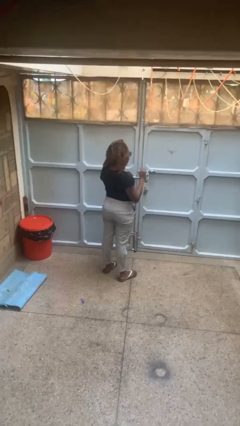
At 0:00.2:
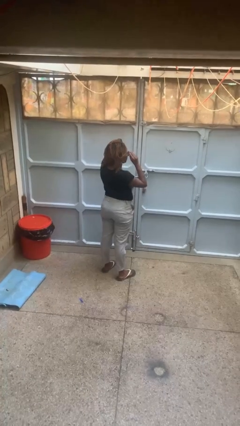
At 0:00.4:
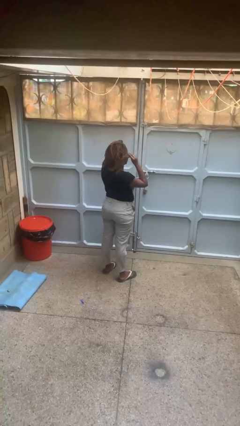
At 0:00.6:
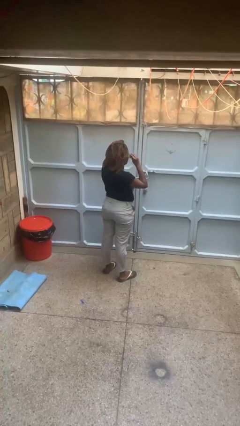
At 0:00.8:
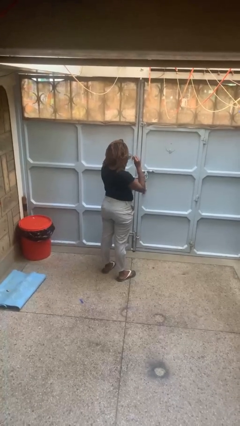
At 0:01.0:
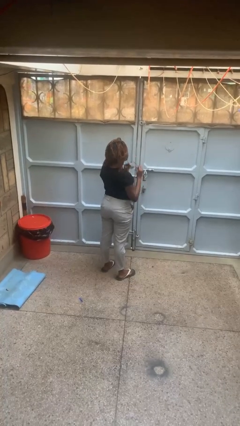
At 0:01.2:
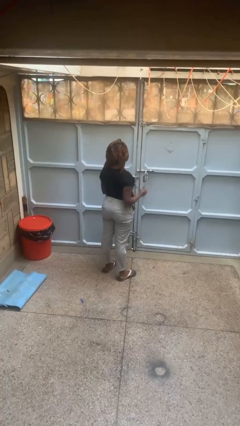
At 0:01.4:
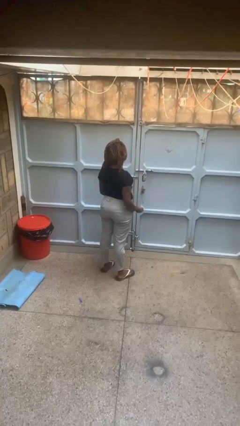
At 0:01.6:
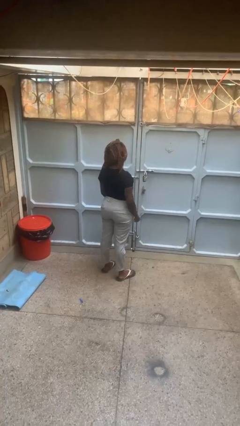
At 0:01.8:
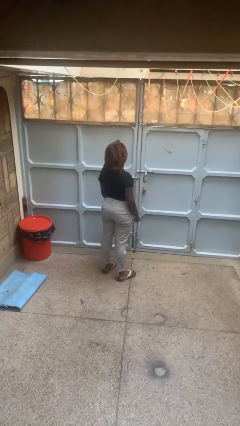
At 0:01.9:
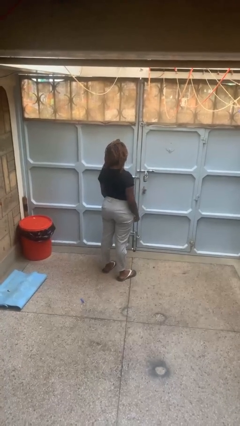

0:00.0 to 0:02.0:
person takes off glasses

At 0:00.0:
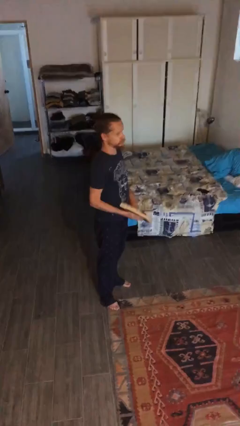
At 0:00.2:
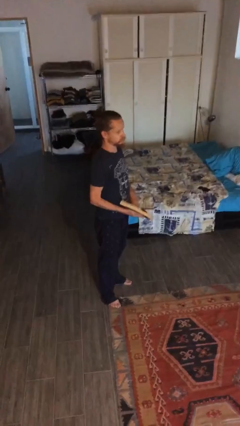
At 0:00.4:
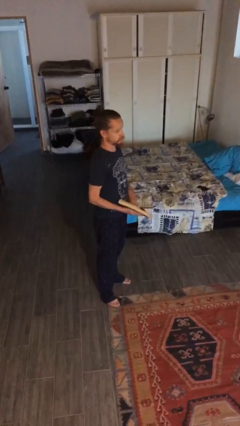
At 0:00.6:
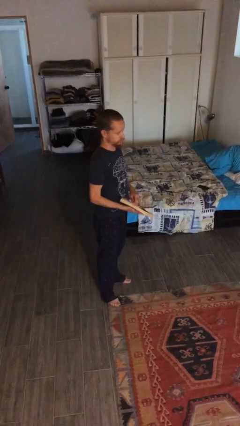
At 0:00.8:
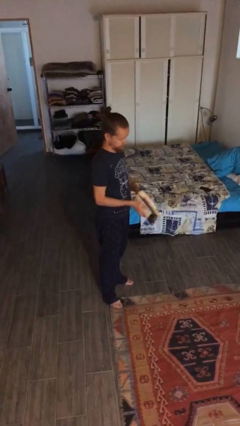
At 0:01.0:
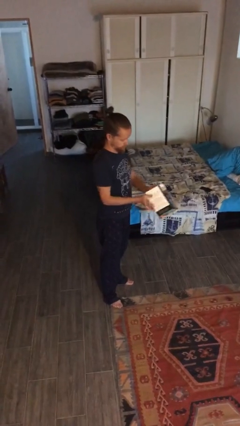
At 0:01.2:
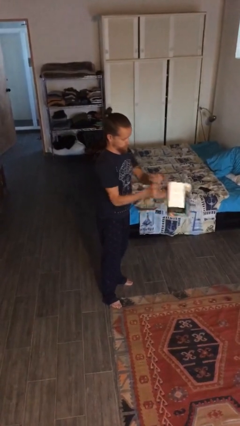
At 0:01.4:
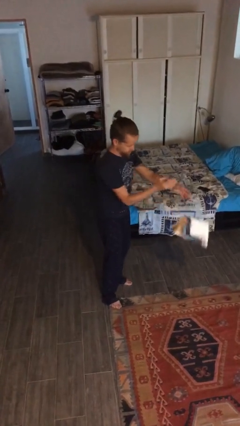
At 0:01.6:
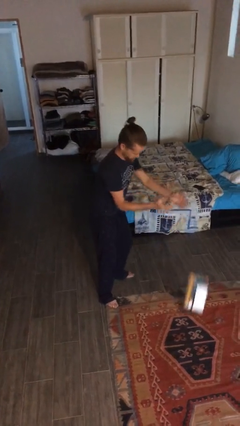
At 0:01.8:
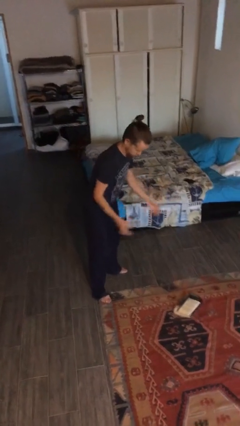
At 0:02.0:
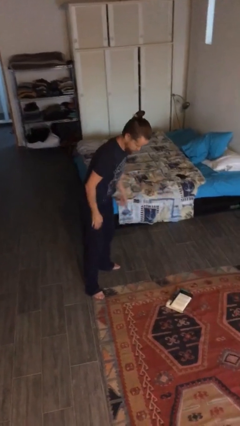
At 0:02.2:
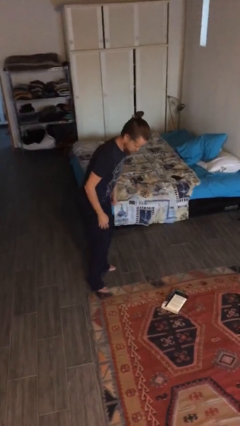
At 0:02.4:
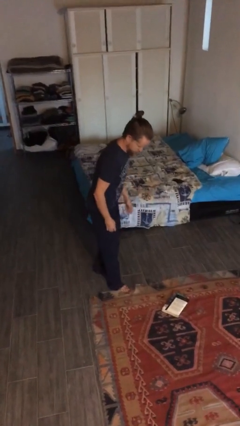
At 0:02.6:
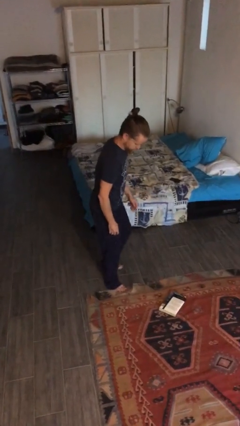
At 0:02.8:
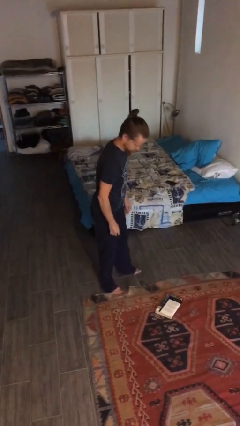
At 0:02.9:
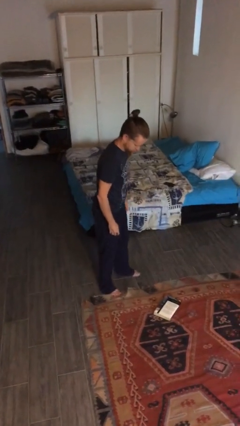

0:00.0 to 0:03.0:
person drops object

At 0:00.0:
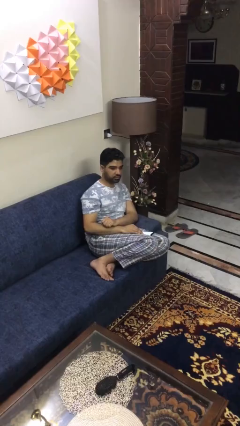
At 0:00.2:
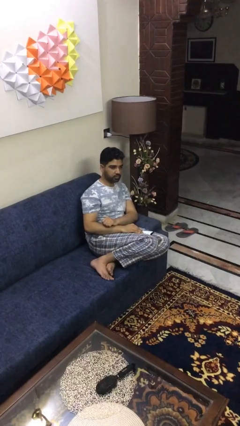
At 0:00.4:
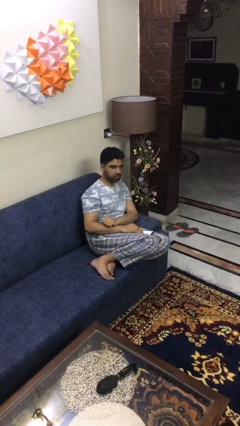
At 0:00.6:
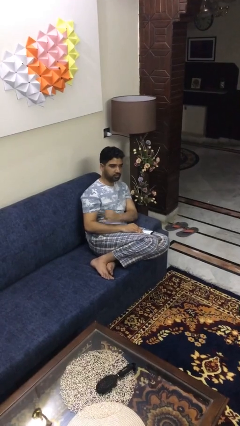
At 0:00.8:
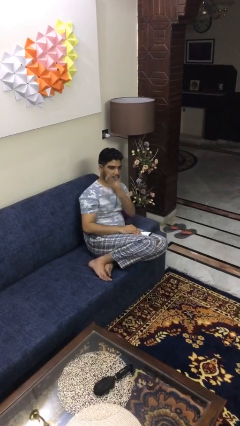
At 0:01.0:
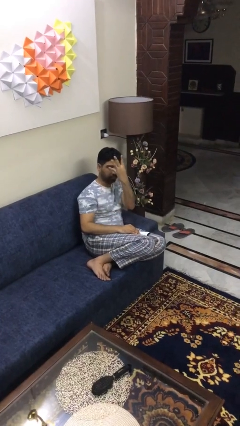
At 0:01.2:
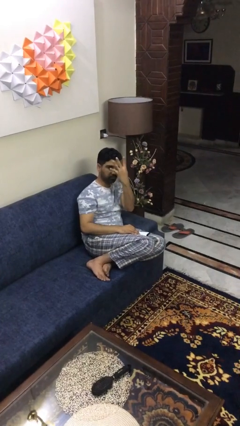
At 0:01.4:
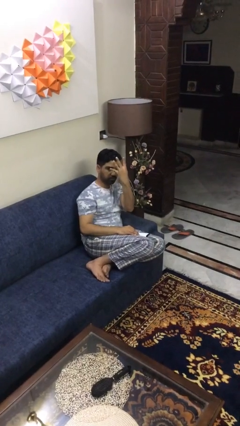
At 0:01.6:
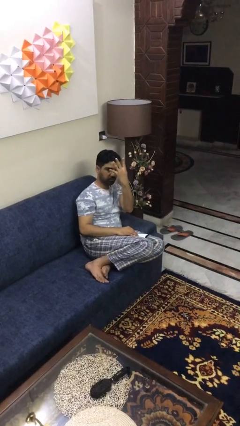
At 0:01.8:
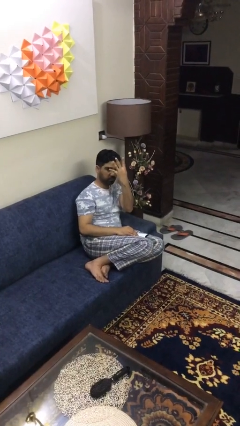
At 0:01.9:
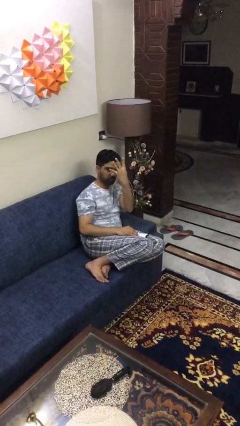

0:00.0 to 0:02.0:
person gestures number four

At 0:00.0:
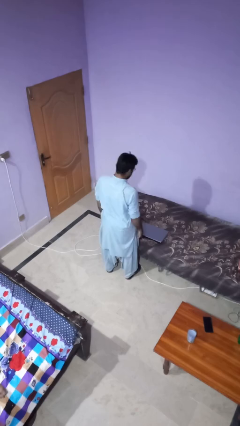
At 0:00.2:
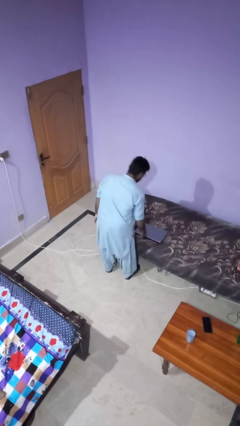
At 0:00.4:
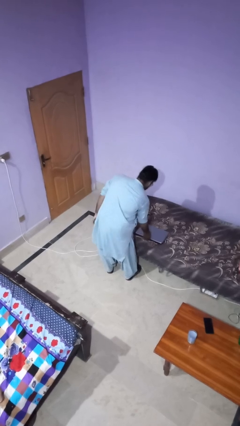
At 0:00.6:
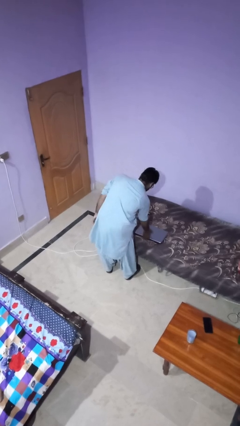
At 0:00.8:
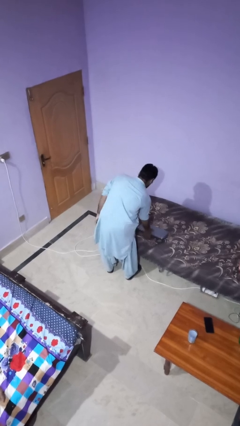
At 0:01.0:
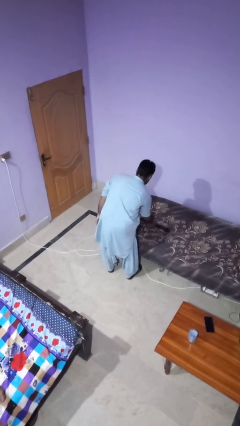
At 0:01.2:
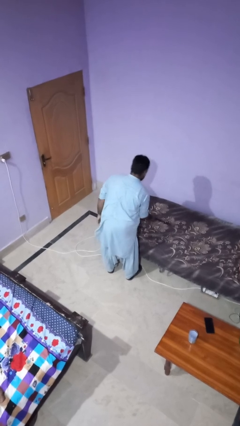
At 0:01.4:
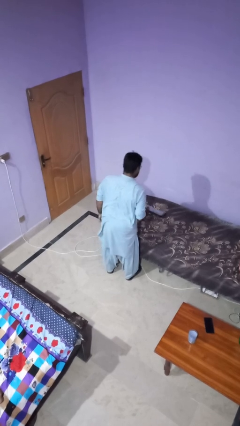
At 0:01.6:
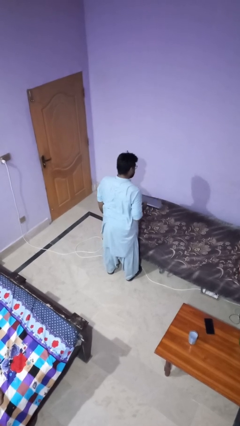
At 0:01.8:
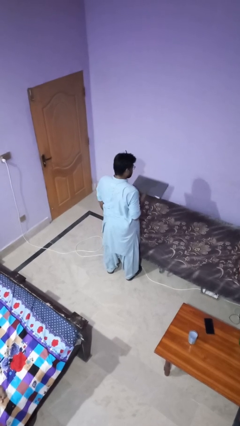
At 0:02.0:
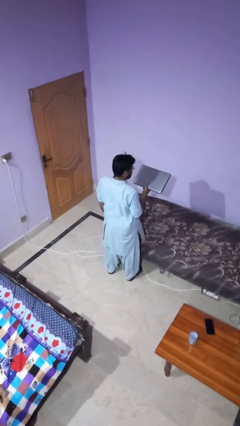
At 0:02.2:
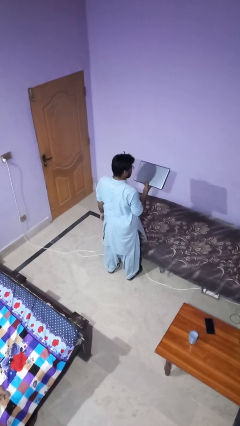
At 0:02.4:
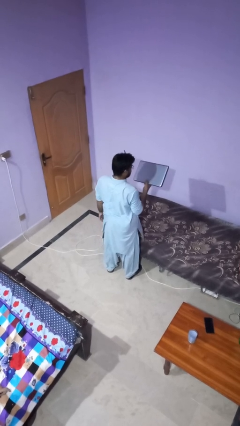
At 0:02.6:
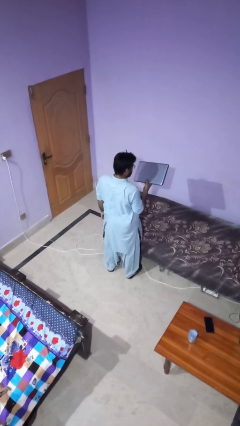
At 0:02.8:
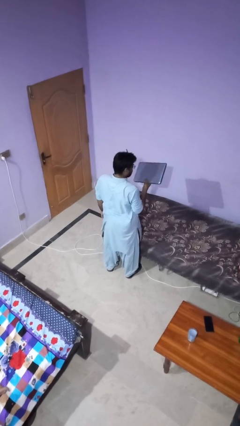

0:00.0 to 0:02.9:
person picks up object from bed

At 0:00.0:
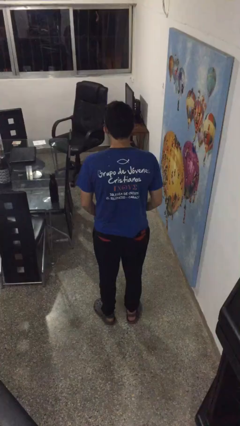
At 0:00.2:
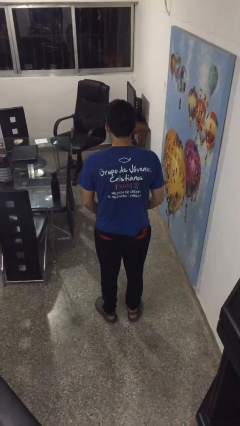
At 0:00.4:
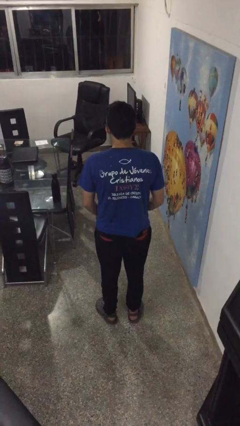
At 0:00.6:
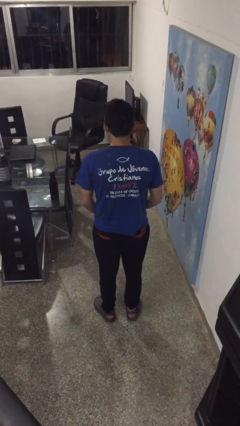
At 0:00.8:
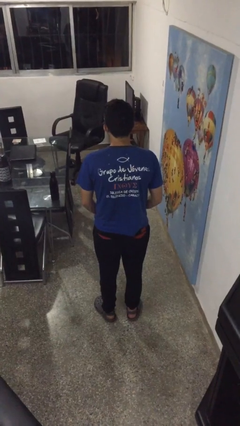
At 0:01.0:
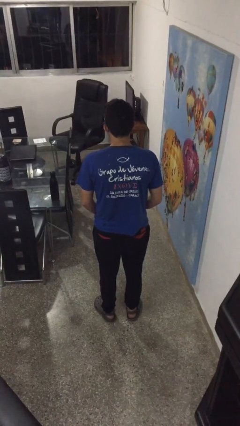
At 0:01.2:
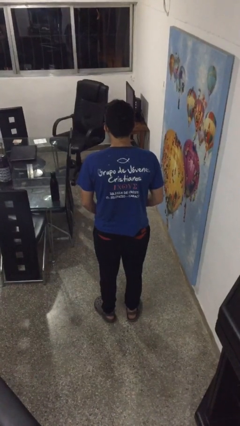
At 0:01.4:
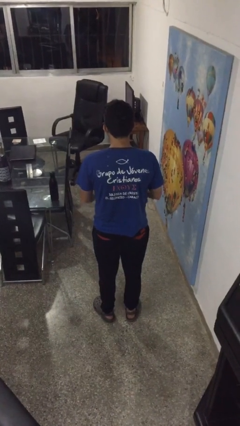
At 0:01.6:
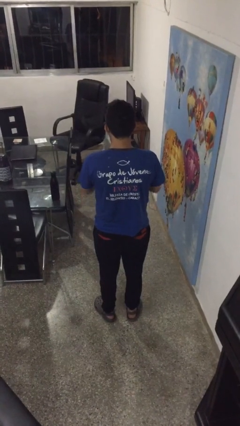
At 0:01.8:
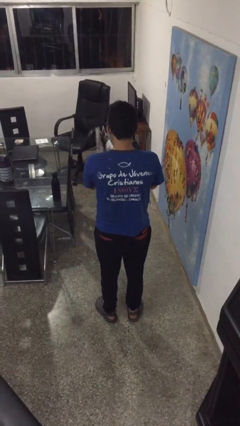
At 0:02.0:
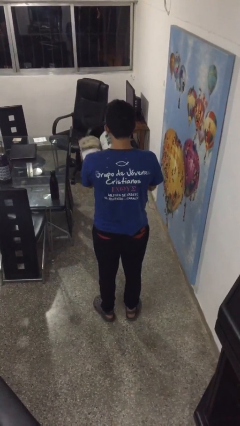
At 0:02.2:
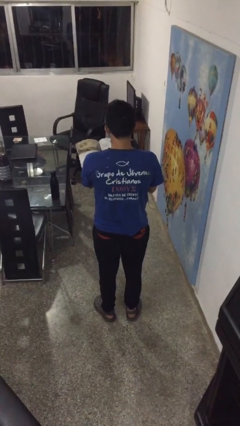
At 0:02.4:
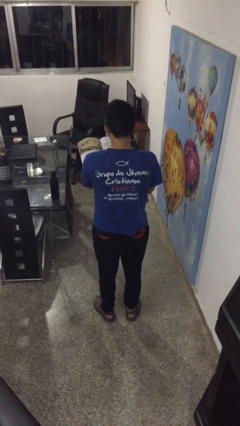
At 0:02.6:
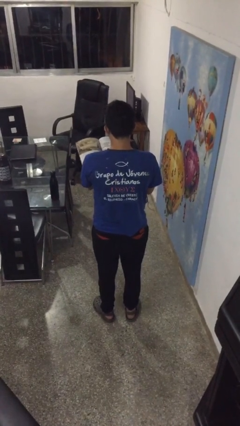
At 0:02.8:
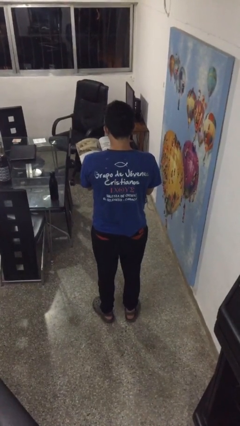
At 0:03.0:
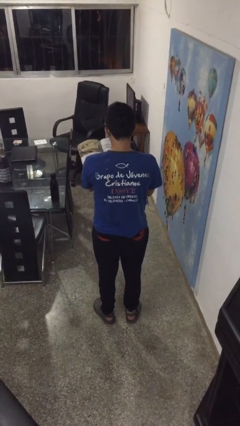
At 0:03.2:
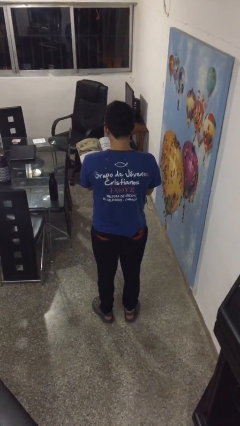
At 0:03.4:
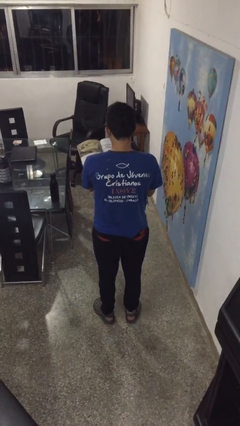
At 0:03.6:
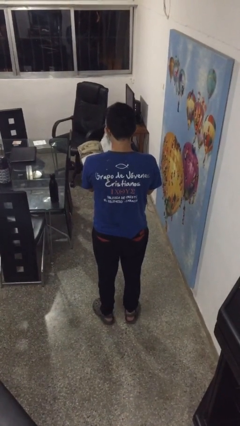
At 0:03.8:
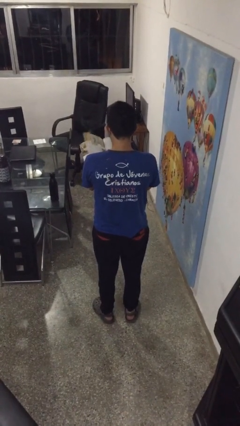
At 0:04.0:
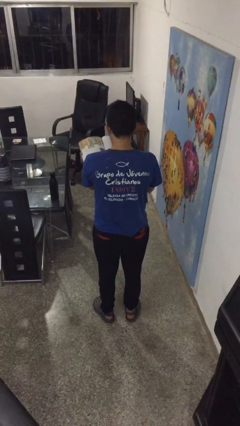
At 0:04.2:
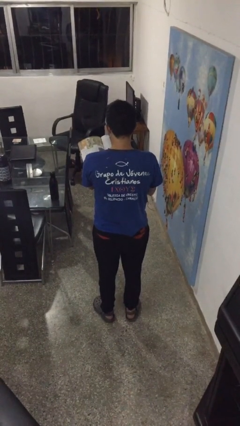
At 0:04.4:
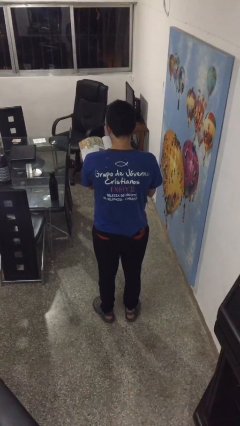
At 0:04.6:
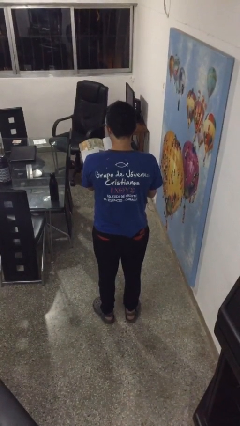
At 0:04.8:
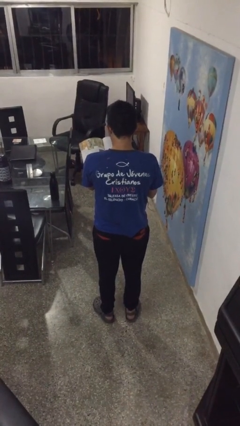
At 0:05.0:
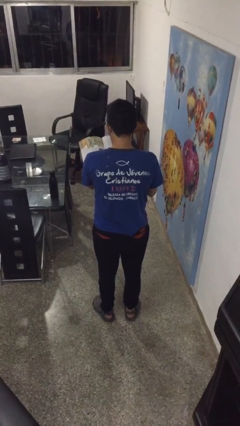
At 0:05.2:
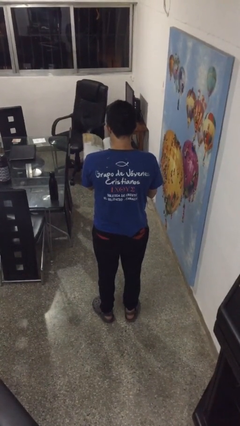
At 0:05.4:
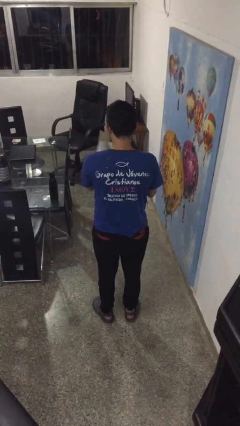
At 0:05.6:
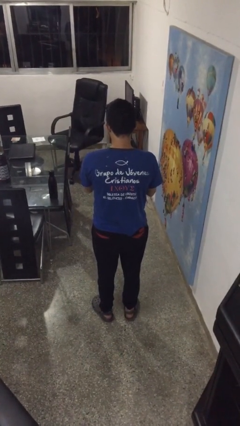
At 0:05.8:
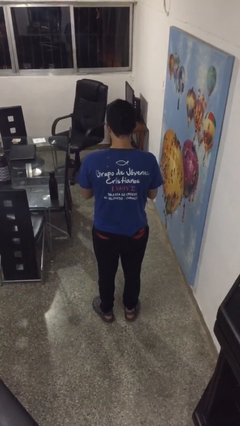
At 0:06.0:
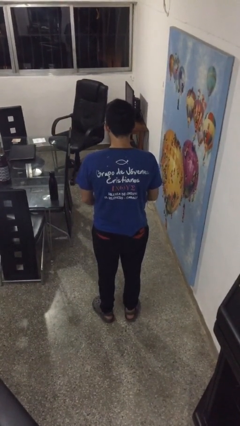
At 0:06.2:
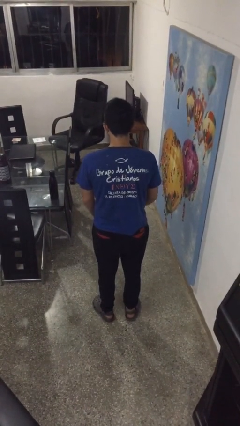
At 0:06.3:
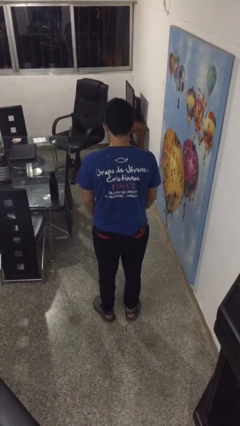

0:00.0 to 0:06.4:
person reads magazine

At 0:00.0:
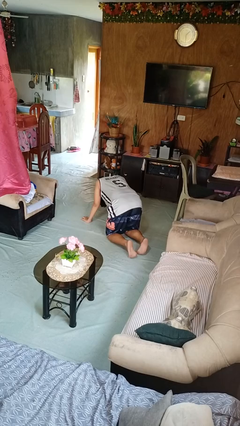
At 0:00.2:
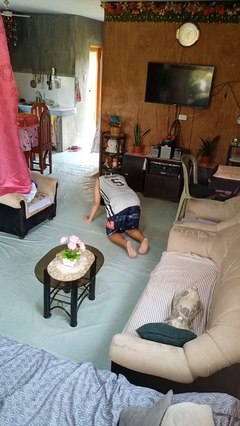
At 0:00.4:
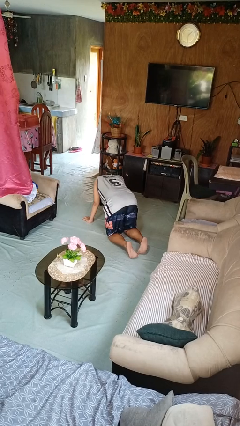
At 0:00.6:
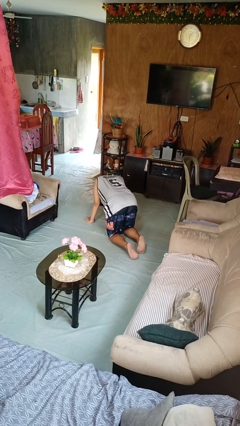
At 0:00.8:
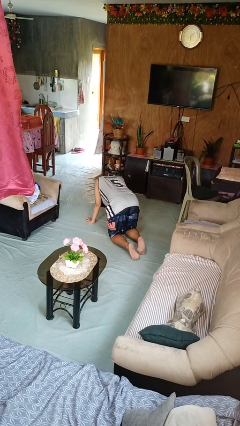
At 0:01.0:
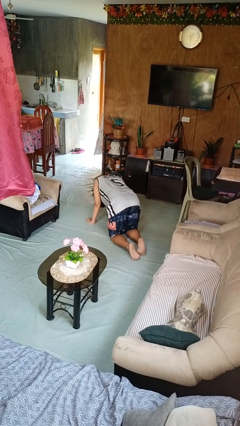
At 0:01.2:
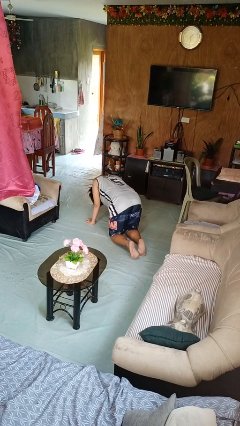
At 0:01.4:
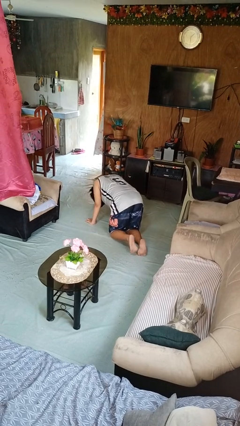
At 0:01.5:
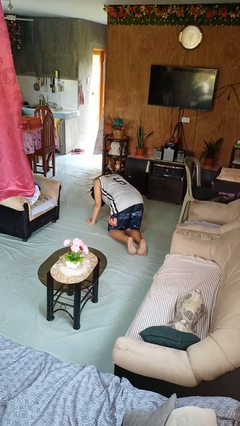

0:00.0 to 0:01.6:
person crawls
